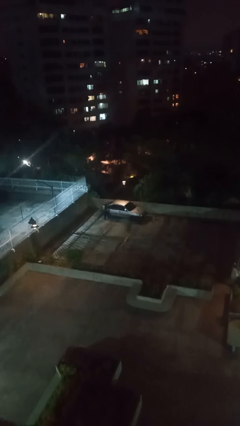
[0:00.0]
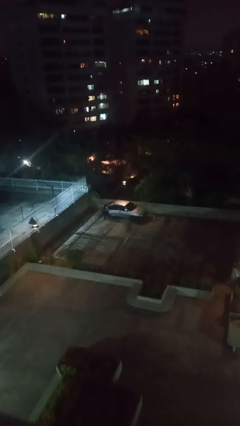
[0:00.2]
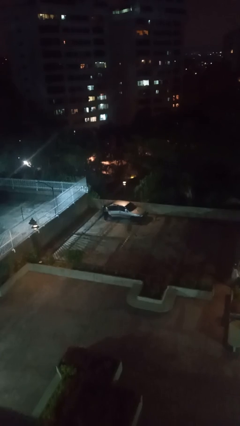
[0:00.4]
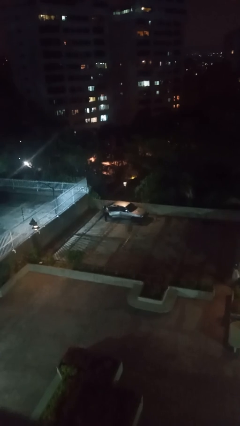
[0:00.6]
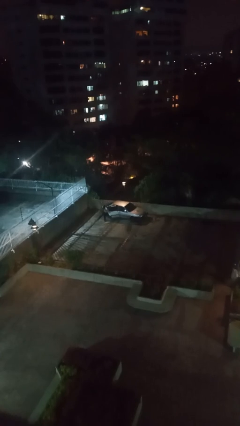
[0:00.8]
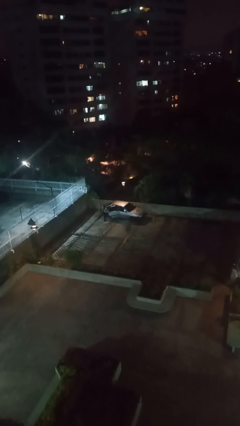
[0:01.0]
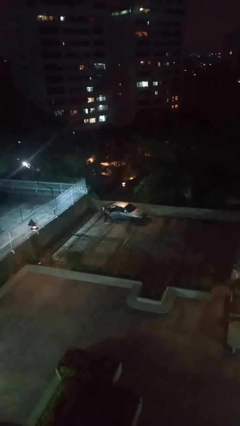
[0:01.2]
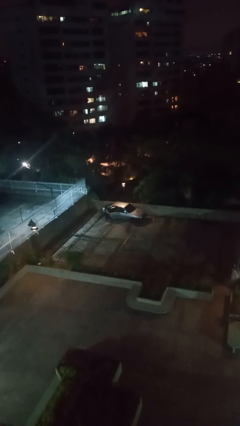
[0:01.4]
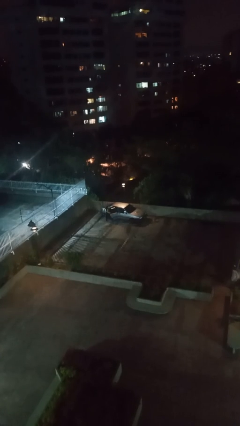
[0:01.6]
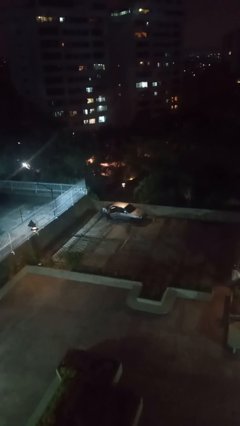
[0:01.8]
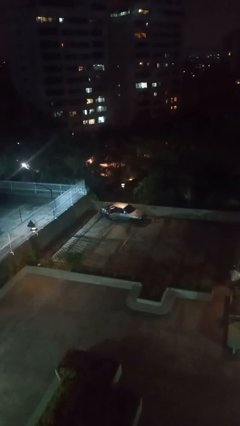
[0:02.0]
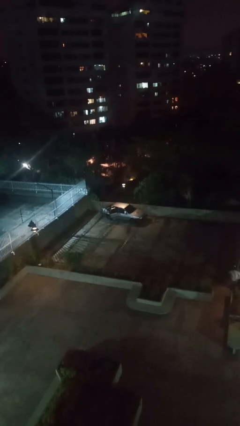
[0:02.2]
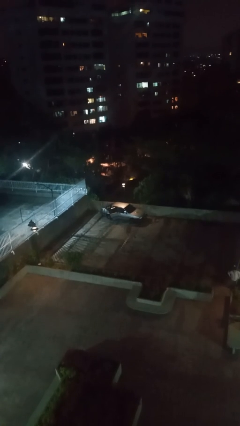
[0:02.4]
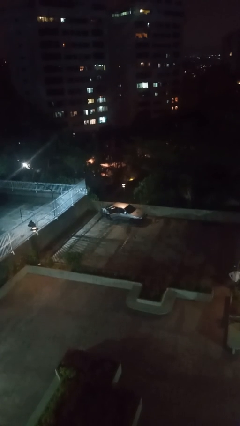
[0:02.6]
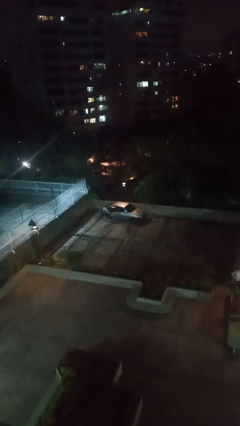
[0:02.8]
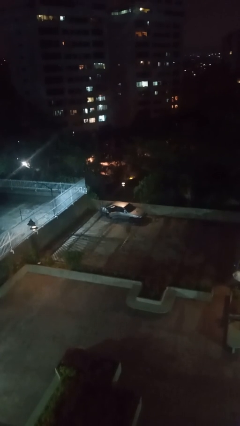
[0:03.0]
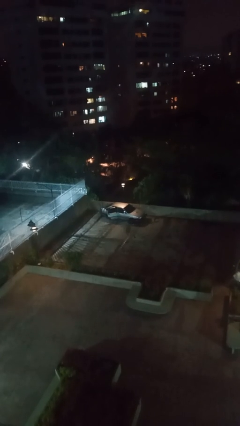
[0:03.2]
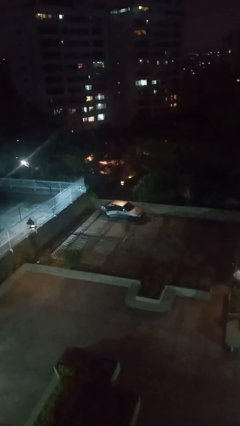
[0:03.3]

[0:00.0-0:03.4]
car picks up person

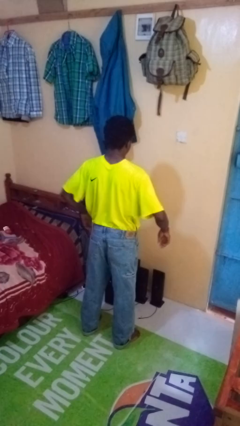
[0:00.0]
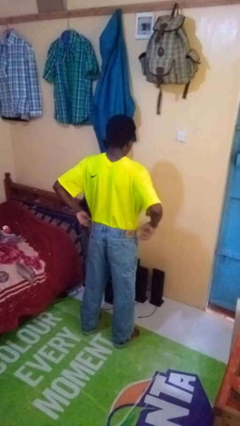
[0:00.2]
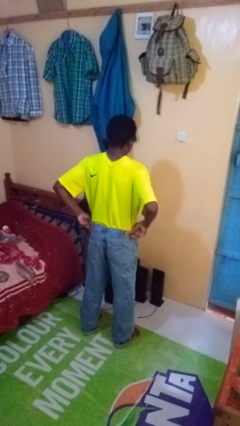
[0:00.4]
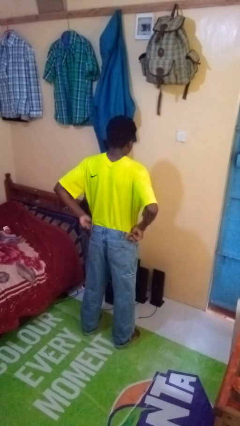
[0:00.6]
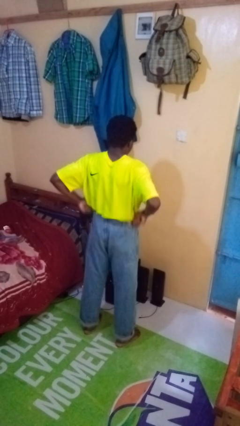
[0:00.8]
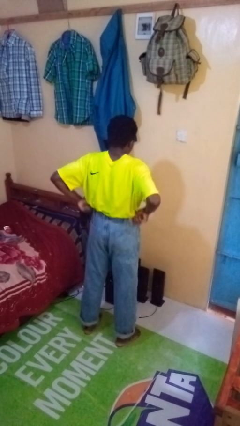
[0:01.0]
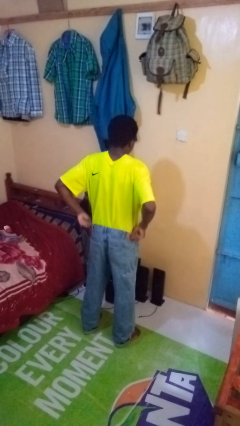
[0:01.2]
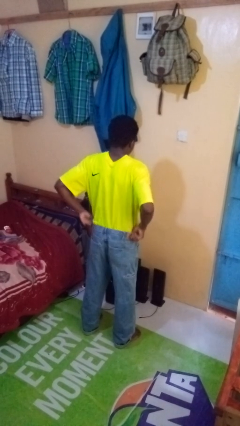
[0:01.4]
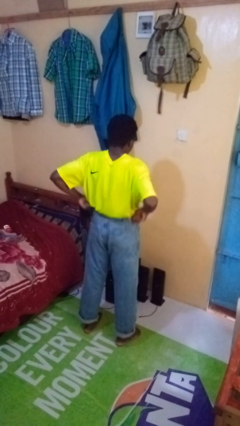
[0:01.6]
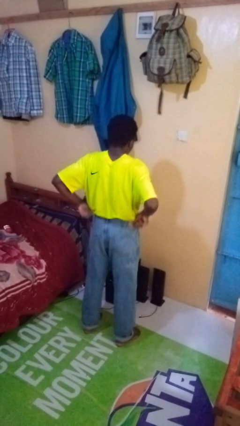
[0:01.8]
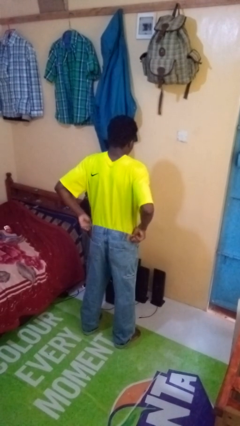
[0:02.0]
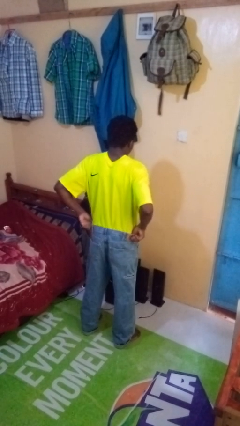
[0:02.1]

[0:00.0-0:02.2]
person hikes up pants

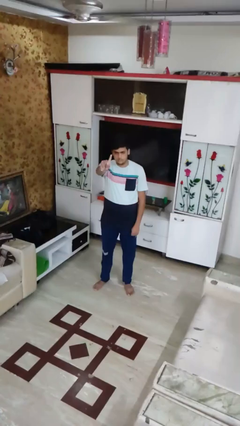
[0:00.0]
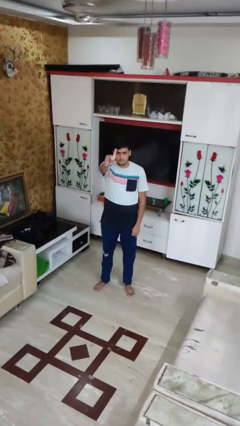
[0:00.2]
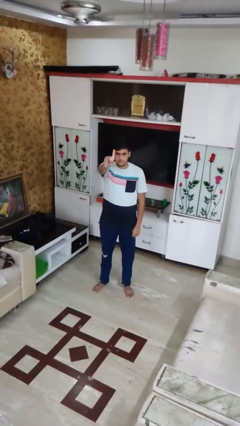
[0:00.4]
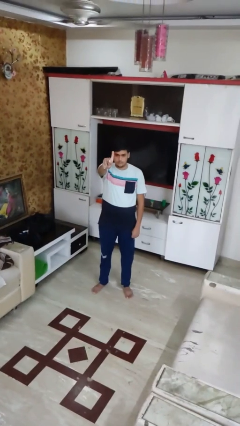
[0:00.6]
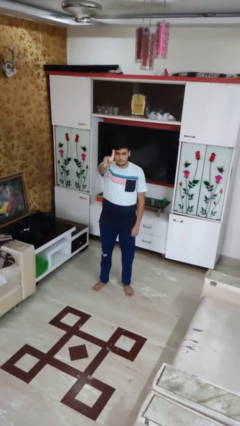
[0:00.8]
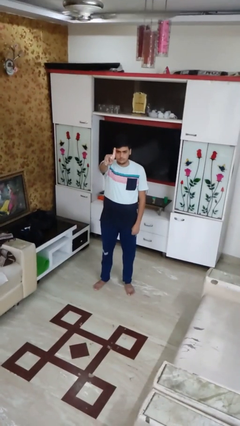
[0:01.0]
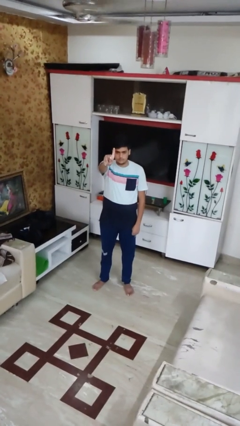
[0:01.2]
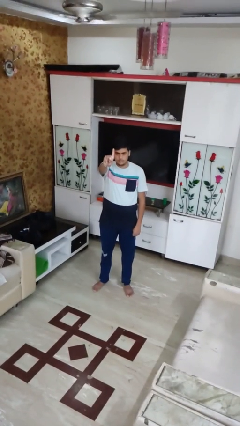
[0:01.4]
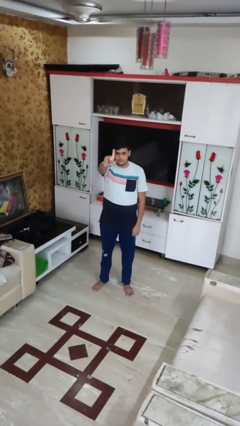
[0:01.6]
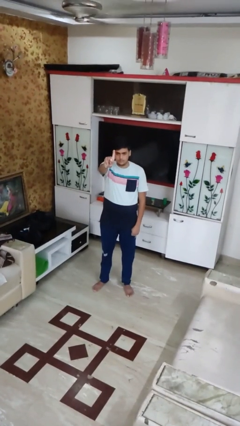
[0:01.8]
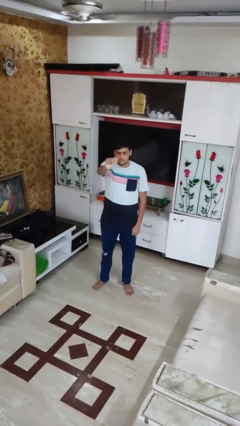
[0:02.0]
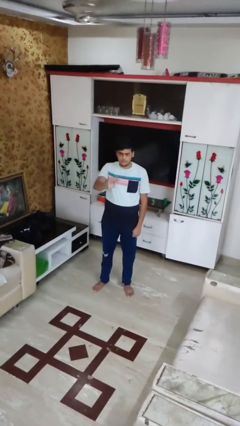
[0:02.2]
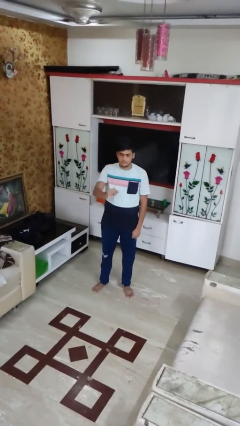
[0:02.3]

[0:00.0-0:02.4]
person gestures number one

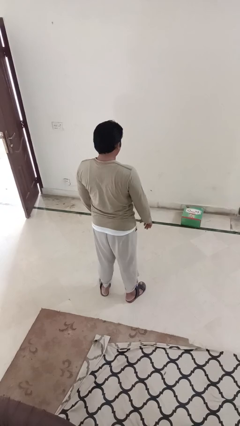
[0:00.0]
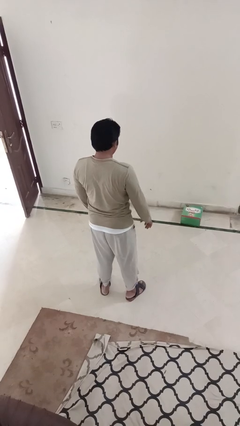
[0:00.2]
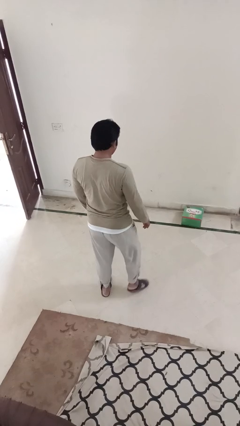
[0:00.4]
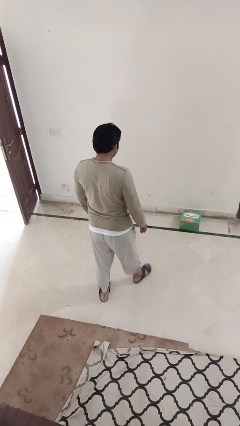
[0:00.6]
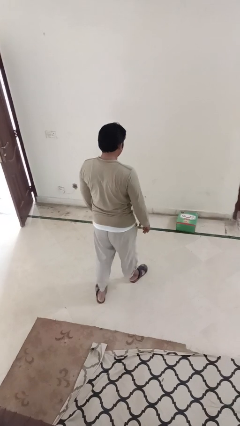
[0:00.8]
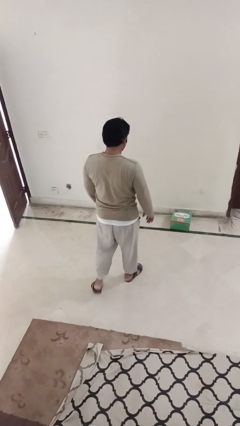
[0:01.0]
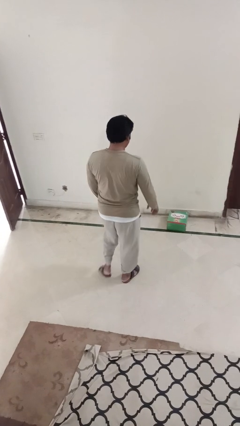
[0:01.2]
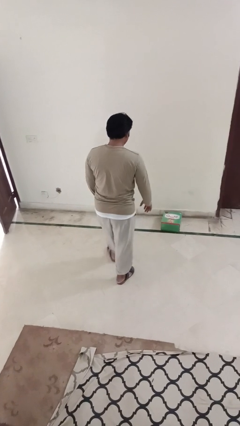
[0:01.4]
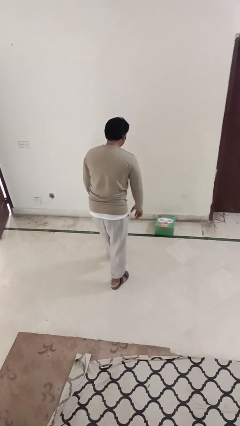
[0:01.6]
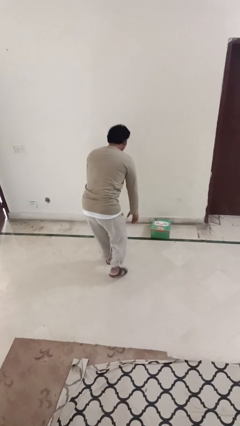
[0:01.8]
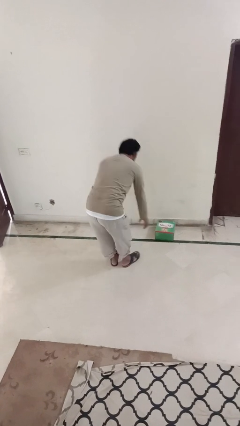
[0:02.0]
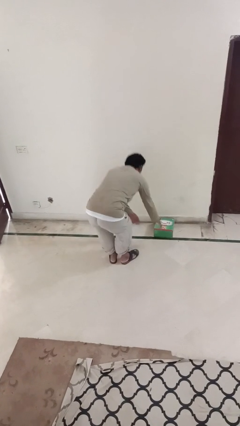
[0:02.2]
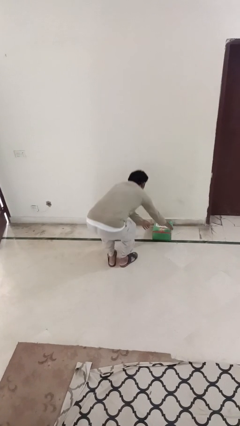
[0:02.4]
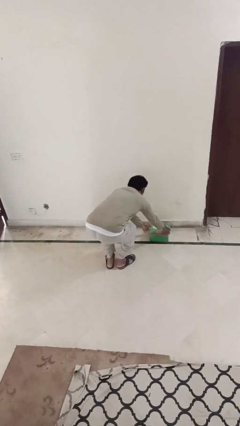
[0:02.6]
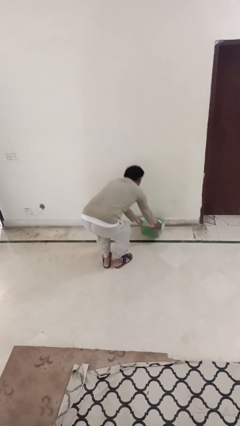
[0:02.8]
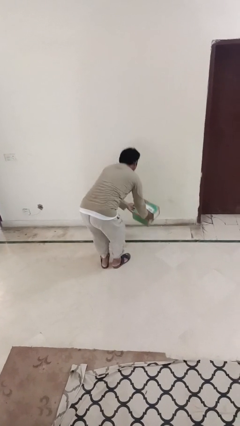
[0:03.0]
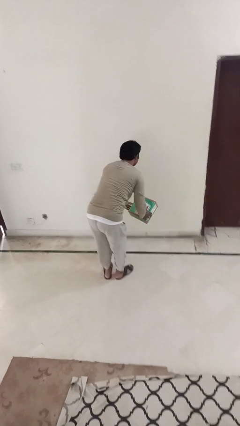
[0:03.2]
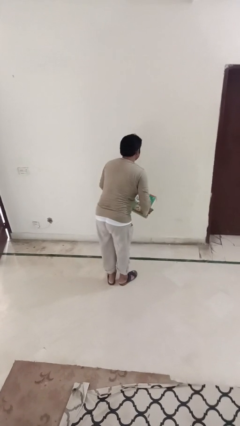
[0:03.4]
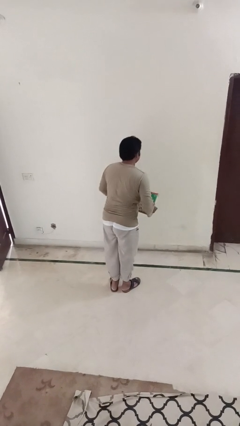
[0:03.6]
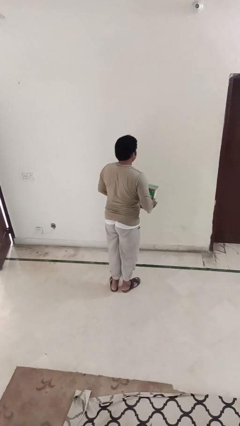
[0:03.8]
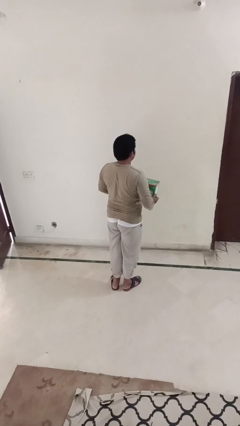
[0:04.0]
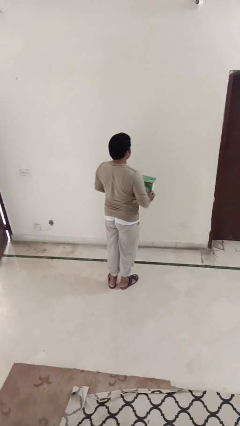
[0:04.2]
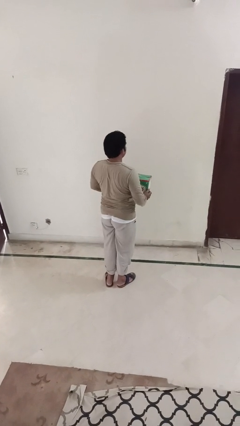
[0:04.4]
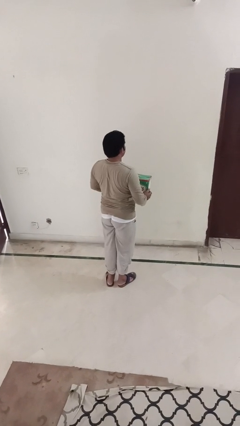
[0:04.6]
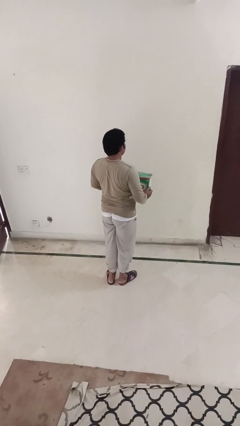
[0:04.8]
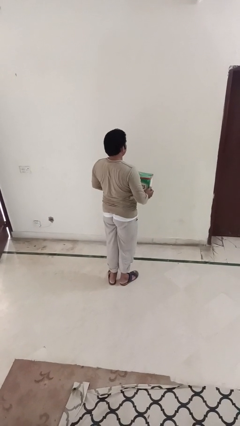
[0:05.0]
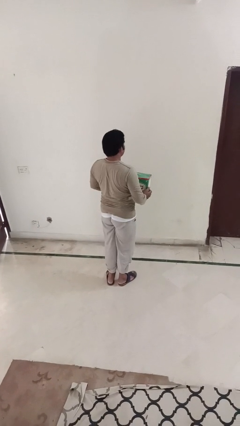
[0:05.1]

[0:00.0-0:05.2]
person picks up object from floor

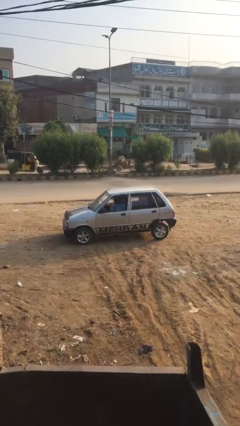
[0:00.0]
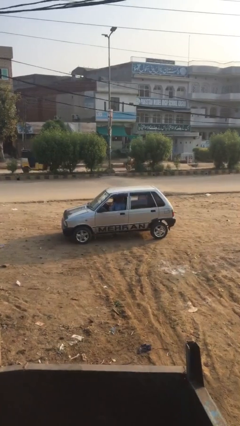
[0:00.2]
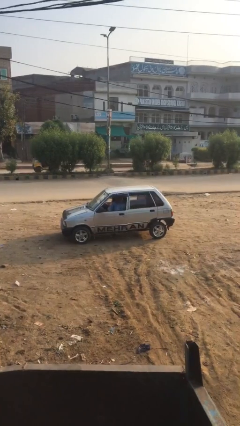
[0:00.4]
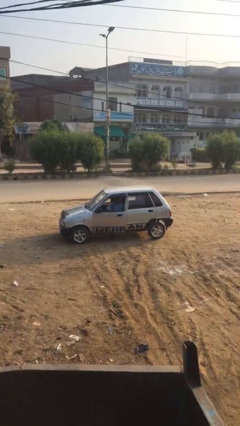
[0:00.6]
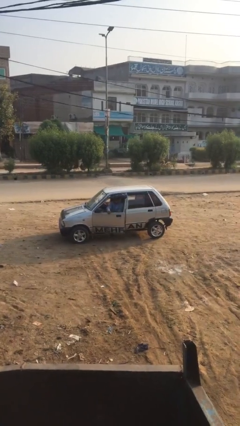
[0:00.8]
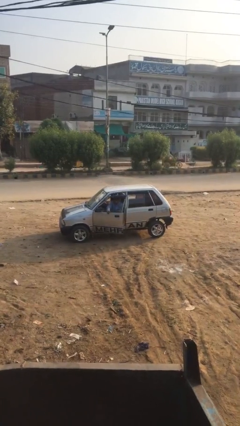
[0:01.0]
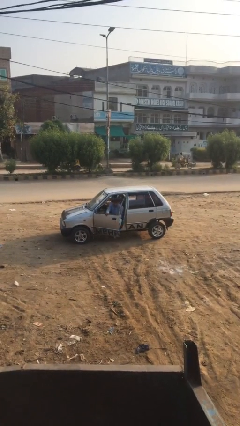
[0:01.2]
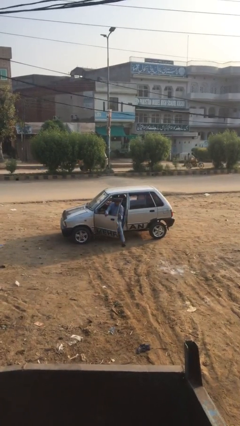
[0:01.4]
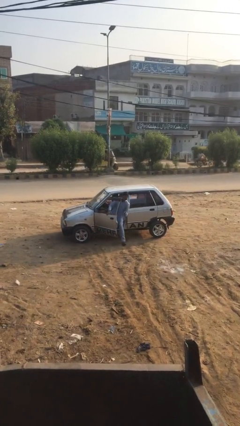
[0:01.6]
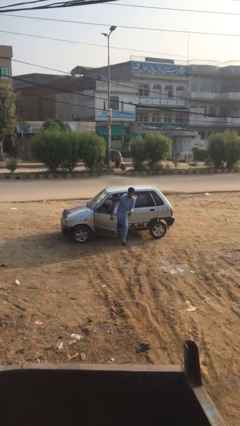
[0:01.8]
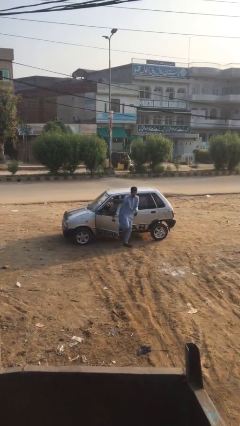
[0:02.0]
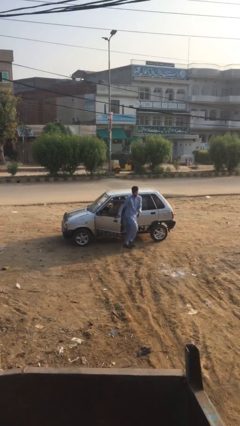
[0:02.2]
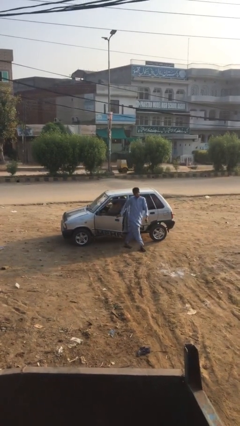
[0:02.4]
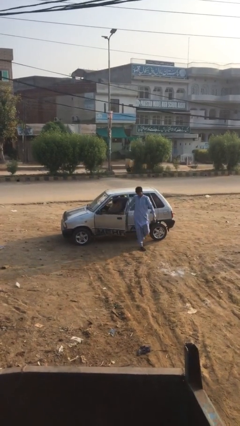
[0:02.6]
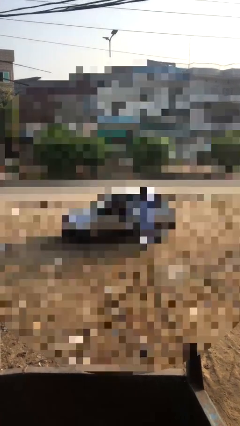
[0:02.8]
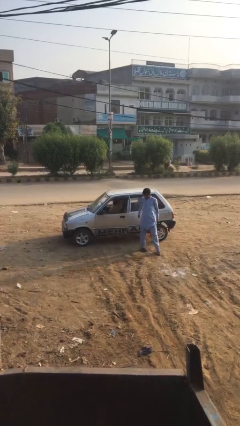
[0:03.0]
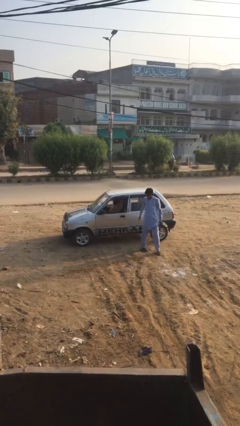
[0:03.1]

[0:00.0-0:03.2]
car drops off person

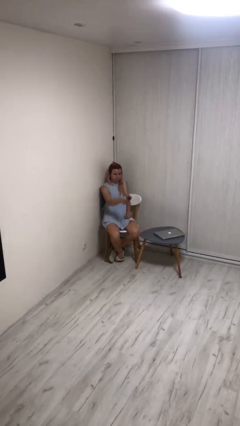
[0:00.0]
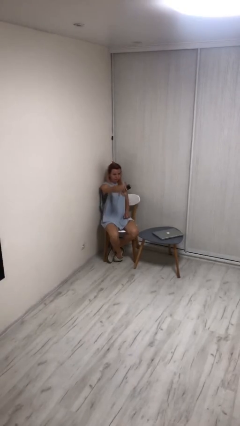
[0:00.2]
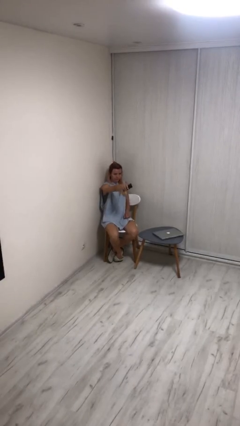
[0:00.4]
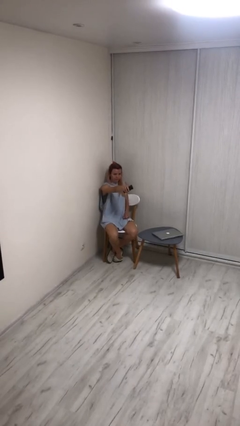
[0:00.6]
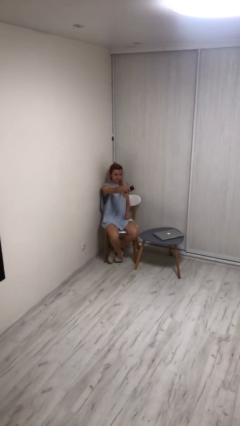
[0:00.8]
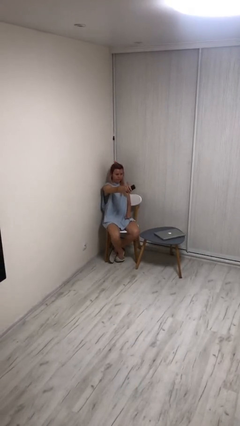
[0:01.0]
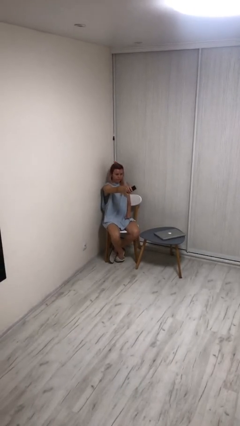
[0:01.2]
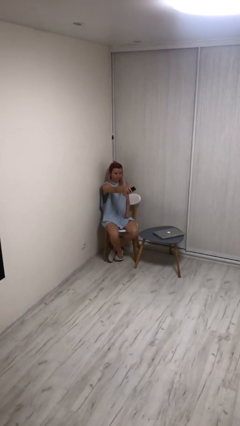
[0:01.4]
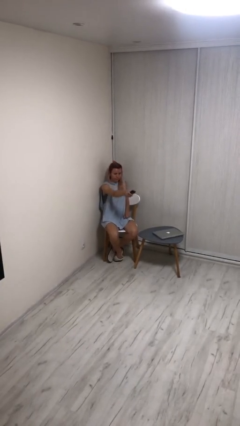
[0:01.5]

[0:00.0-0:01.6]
person uses television remote
